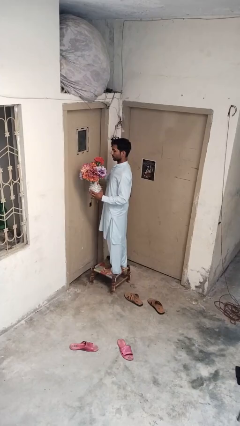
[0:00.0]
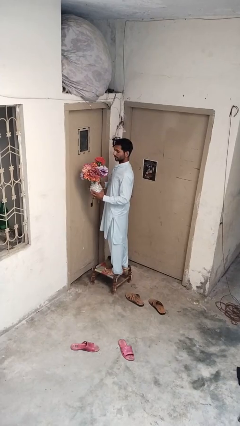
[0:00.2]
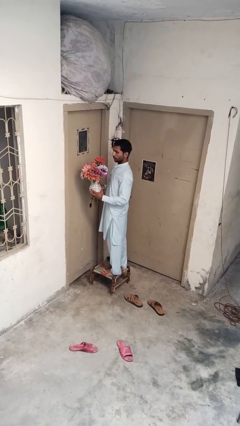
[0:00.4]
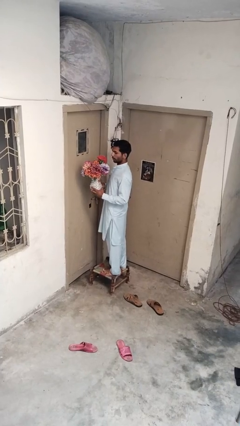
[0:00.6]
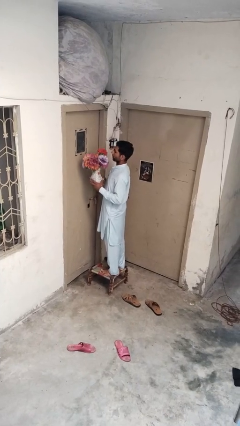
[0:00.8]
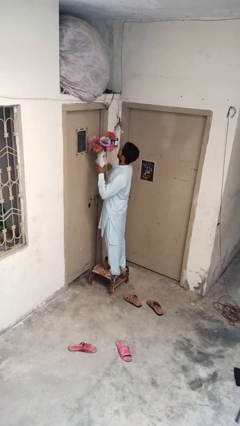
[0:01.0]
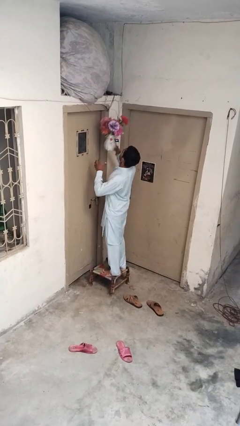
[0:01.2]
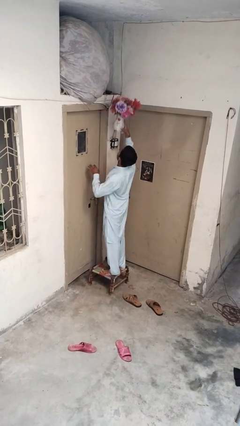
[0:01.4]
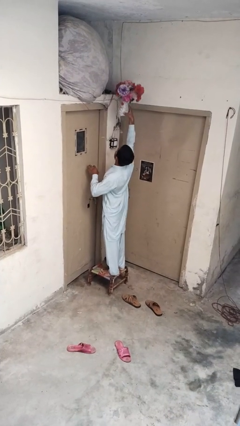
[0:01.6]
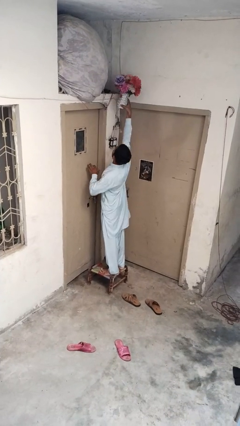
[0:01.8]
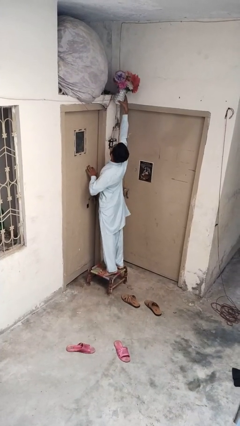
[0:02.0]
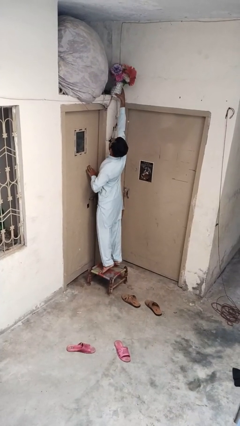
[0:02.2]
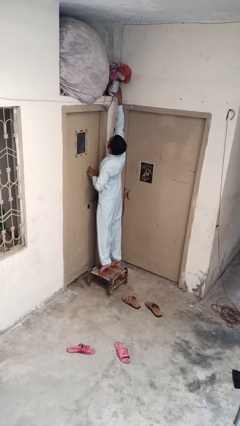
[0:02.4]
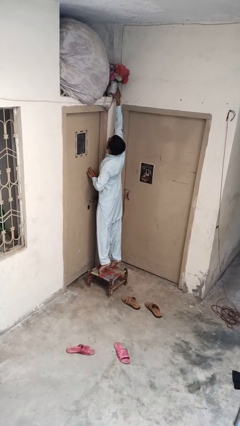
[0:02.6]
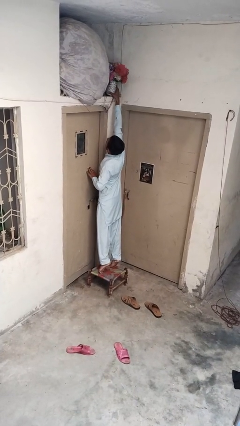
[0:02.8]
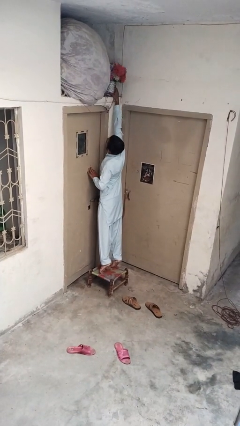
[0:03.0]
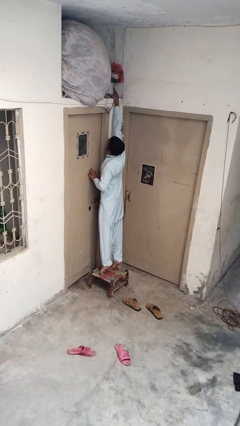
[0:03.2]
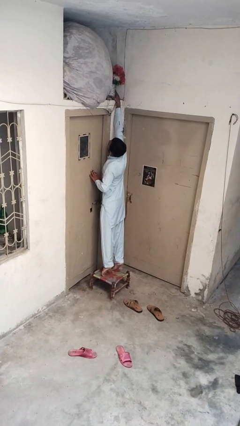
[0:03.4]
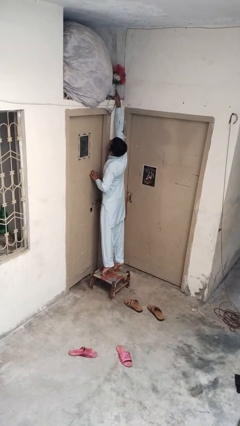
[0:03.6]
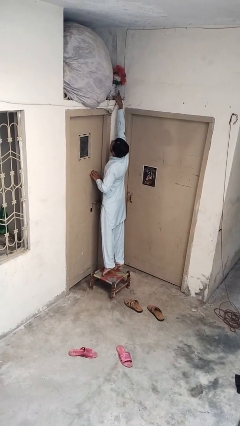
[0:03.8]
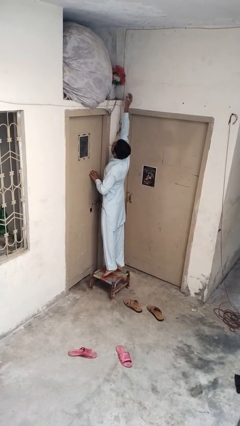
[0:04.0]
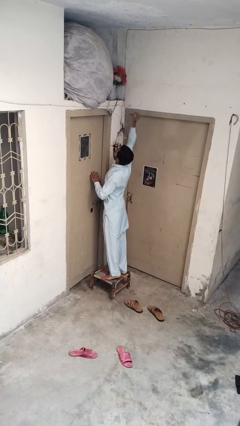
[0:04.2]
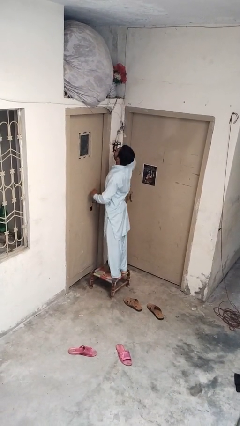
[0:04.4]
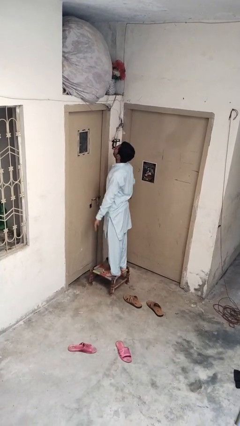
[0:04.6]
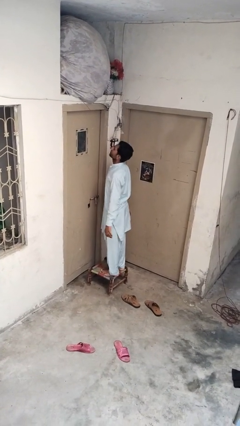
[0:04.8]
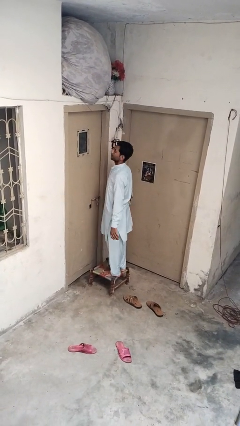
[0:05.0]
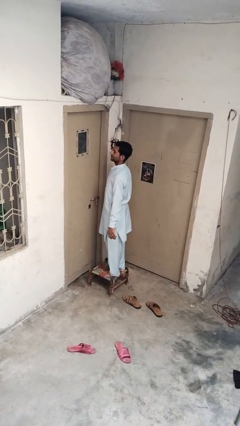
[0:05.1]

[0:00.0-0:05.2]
person puts down object on shelf

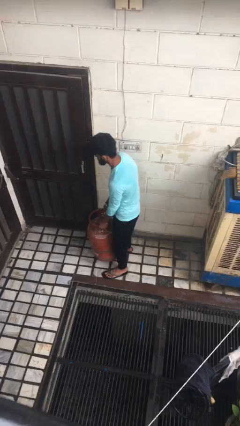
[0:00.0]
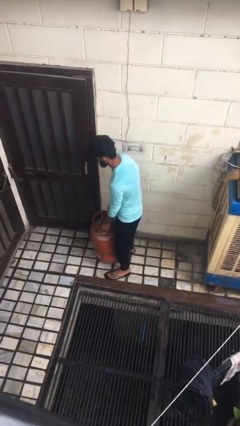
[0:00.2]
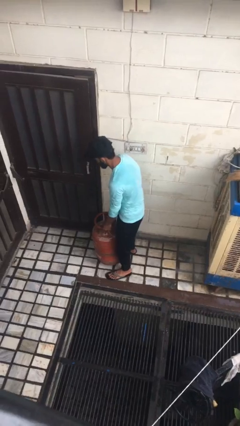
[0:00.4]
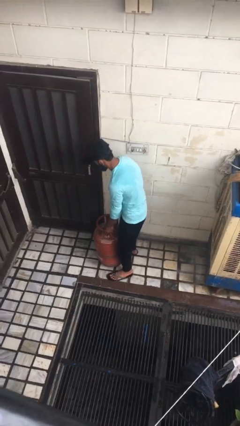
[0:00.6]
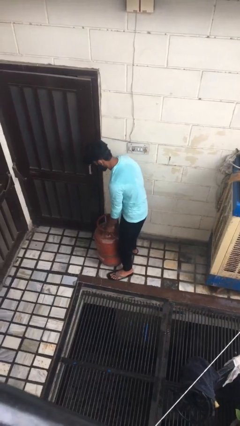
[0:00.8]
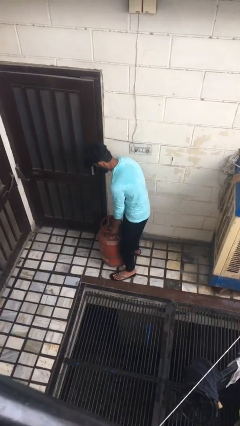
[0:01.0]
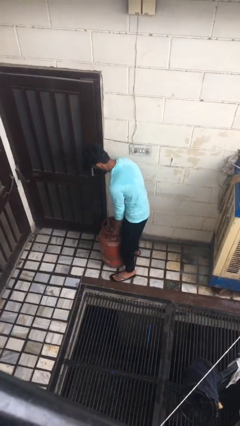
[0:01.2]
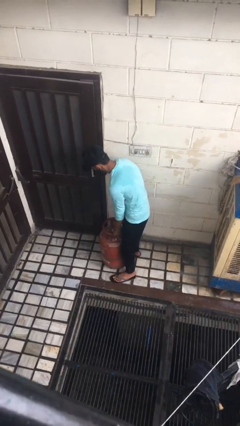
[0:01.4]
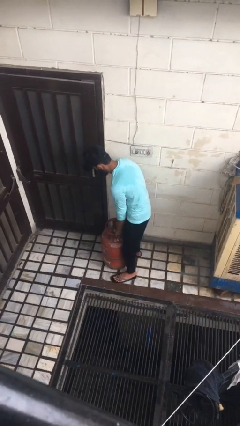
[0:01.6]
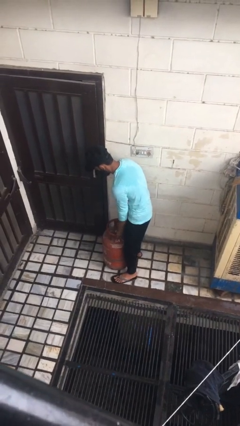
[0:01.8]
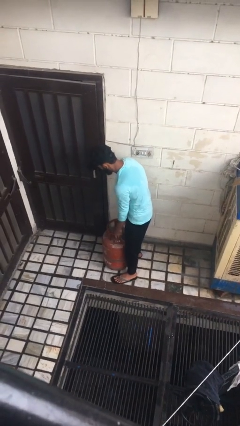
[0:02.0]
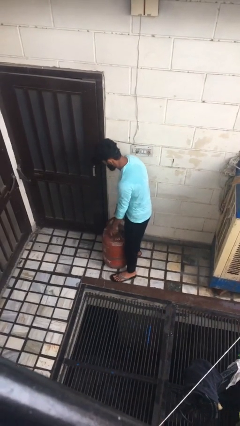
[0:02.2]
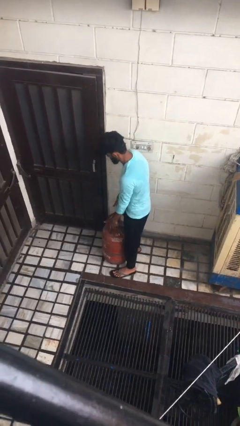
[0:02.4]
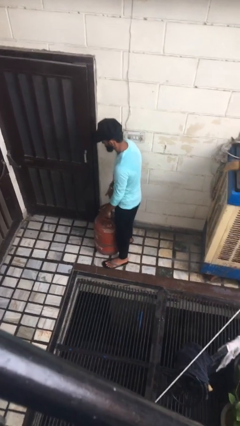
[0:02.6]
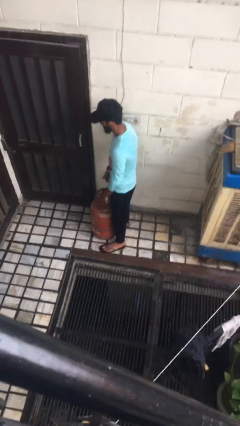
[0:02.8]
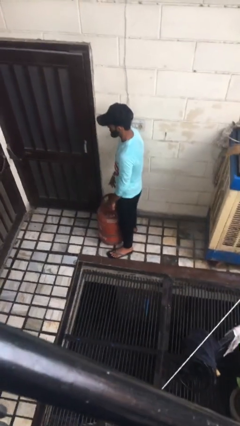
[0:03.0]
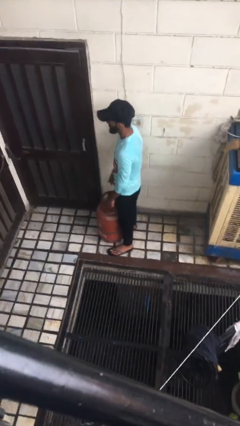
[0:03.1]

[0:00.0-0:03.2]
person puts down object on floor

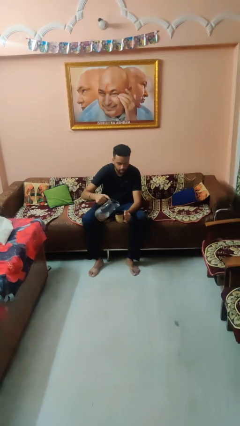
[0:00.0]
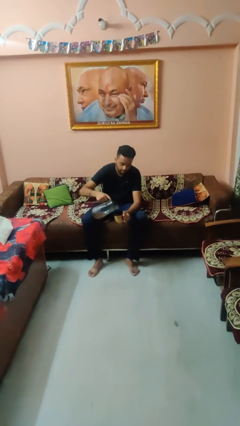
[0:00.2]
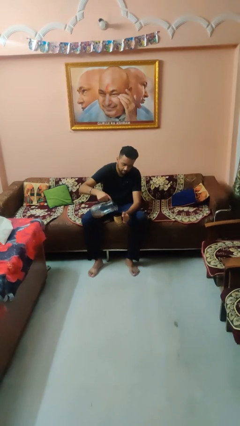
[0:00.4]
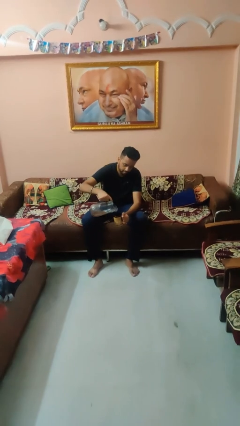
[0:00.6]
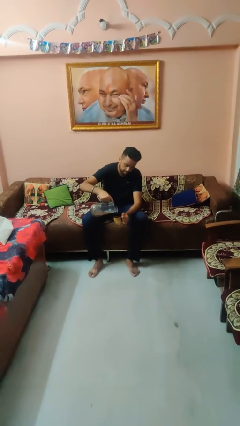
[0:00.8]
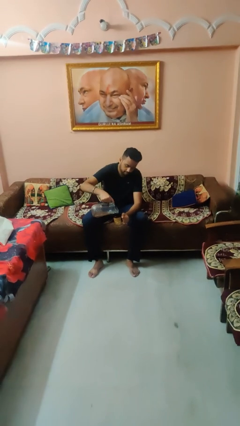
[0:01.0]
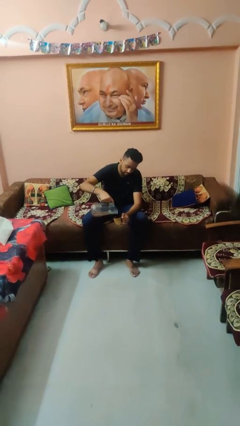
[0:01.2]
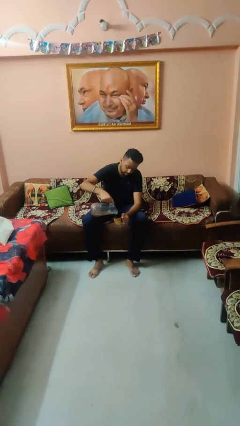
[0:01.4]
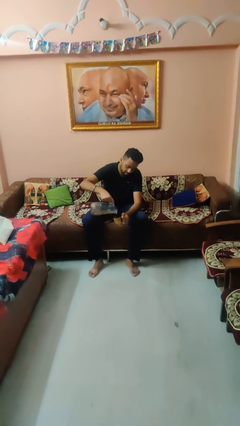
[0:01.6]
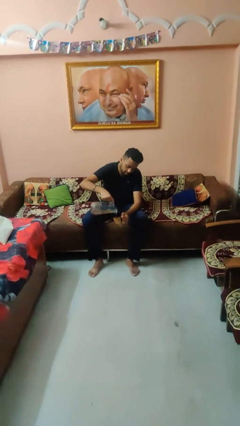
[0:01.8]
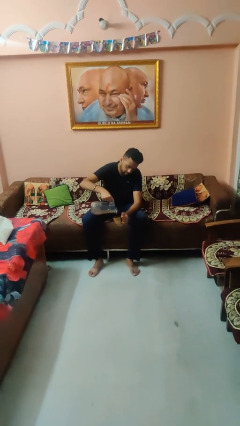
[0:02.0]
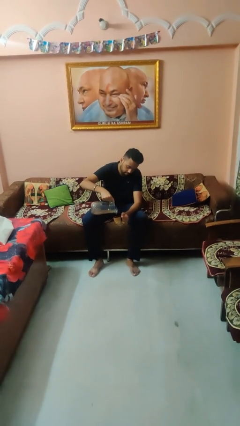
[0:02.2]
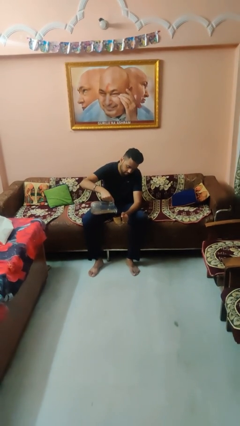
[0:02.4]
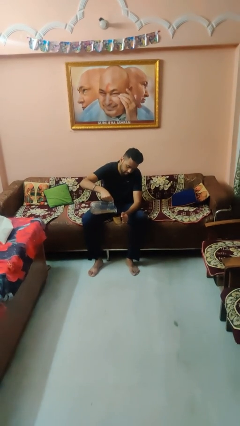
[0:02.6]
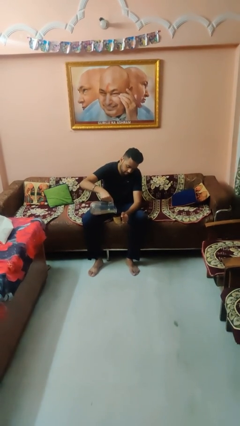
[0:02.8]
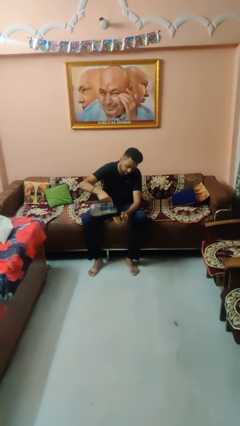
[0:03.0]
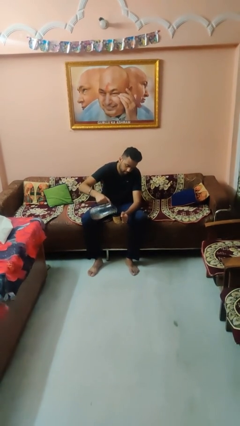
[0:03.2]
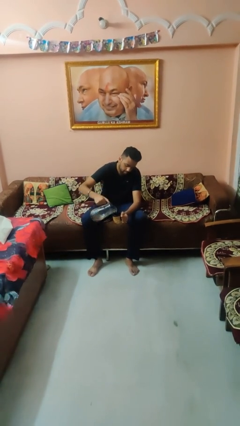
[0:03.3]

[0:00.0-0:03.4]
person pours coffee into mug

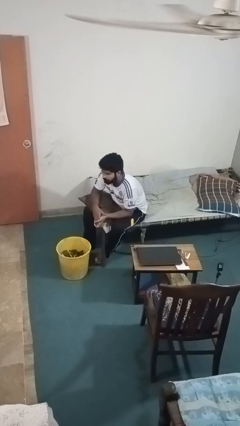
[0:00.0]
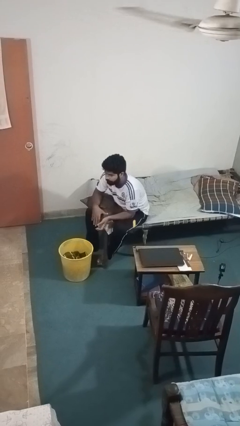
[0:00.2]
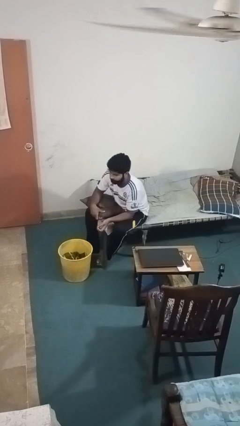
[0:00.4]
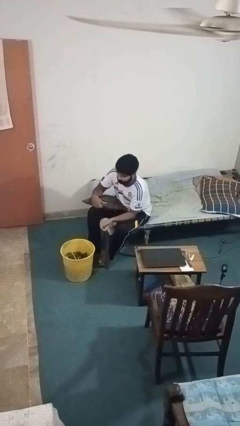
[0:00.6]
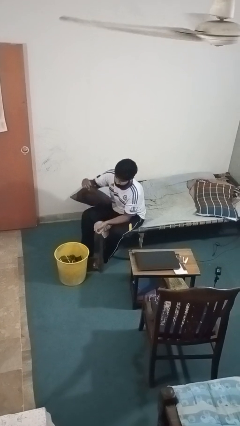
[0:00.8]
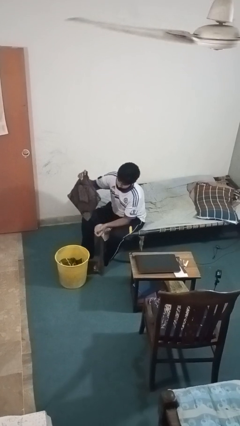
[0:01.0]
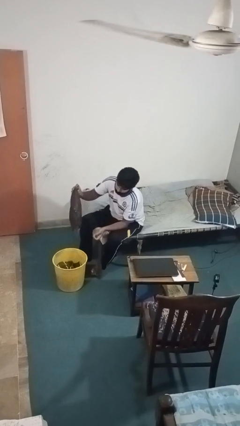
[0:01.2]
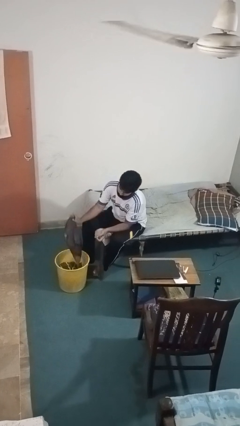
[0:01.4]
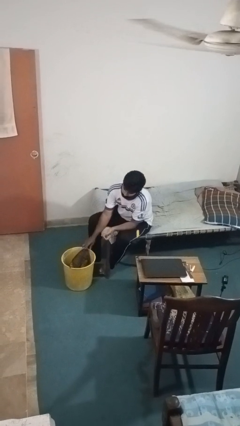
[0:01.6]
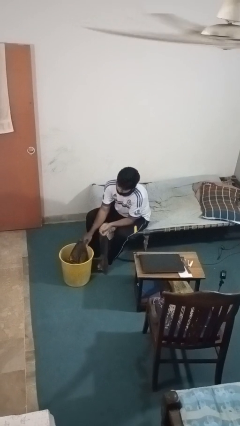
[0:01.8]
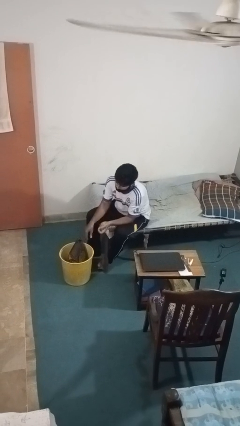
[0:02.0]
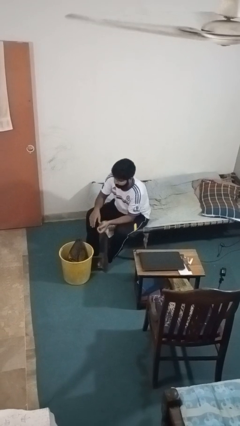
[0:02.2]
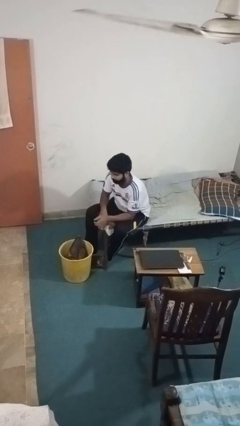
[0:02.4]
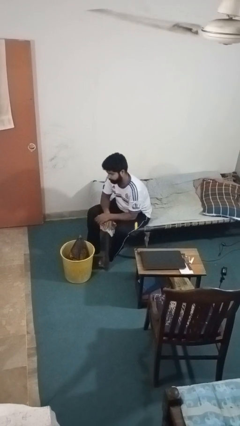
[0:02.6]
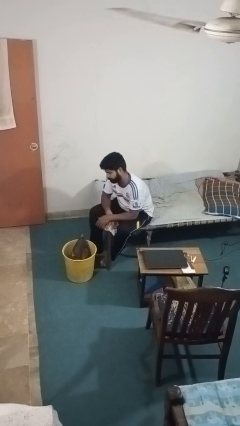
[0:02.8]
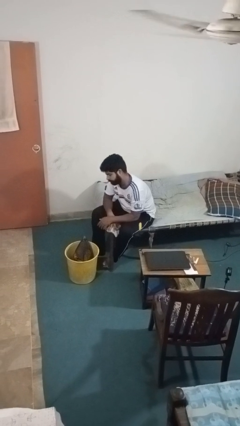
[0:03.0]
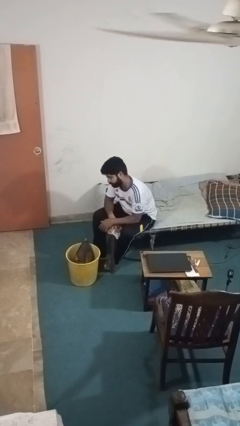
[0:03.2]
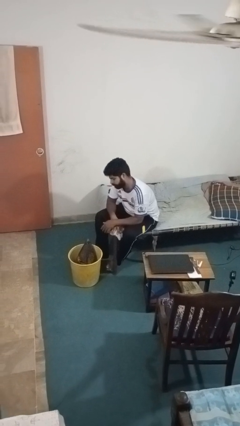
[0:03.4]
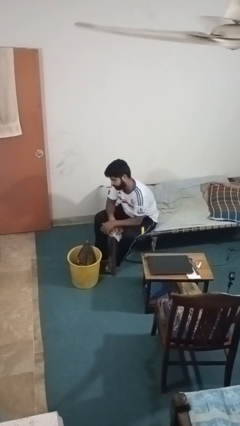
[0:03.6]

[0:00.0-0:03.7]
person puts object into basket

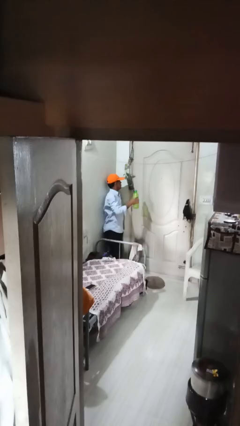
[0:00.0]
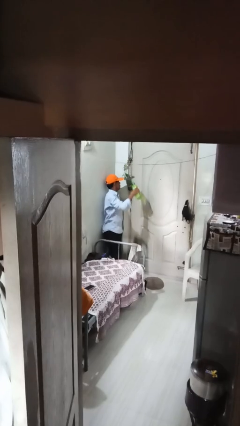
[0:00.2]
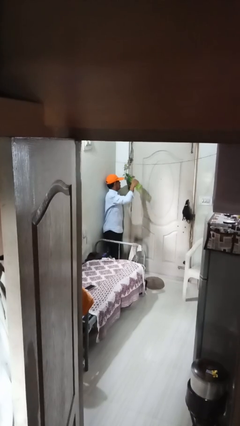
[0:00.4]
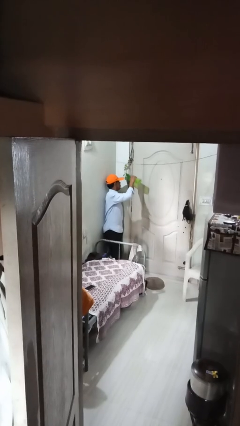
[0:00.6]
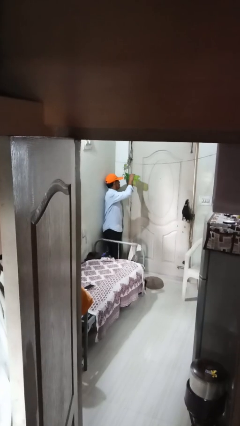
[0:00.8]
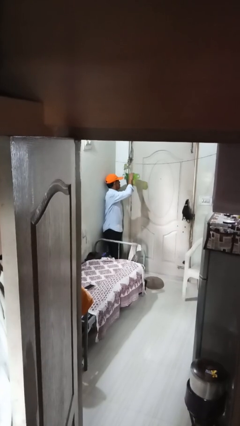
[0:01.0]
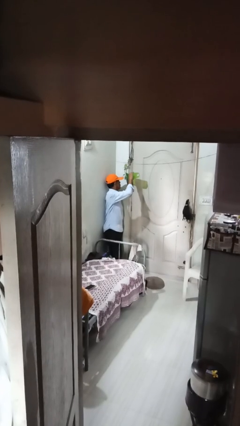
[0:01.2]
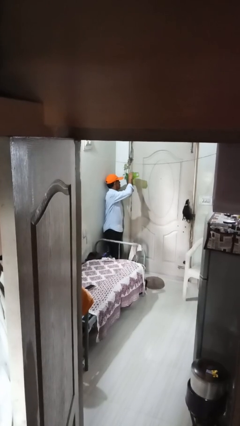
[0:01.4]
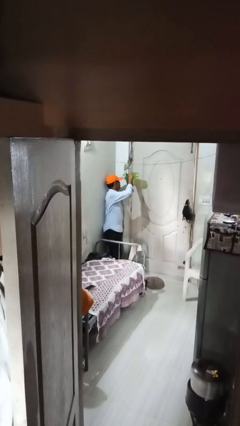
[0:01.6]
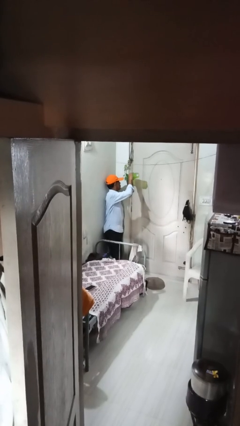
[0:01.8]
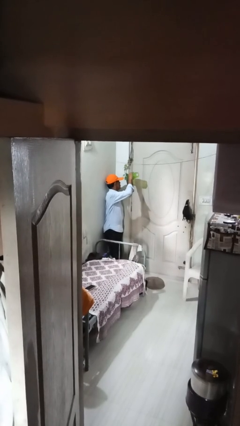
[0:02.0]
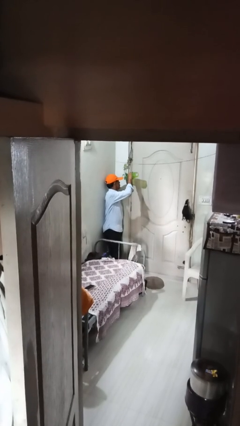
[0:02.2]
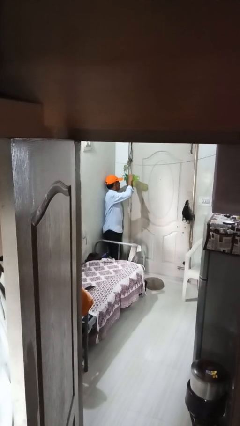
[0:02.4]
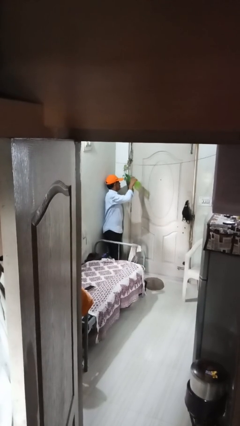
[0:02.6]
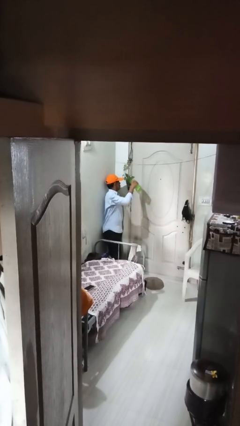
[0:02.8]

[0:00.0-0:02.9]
person waters houseplant
